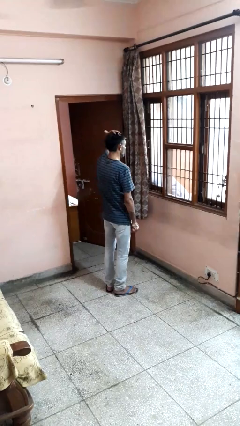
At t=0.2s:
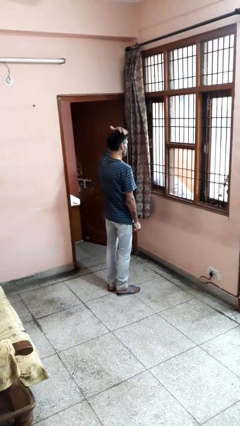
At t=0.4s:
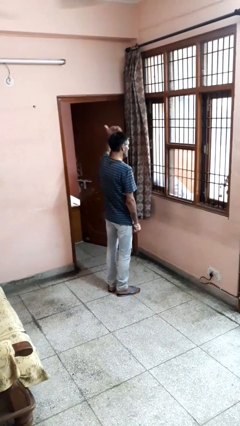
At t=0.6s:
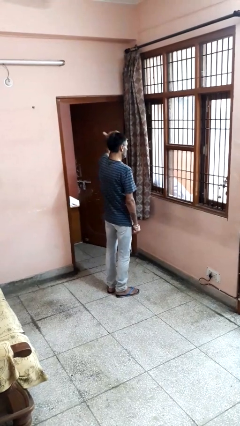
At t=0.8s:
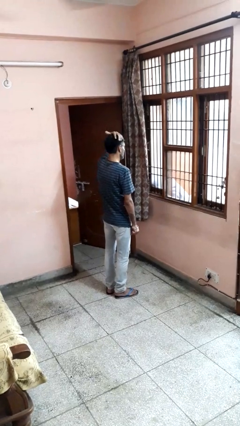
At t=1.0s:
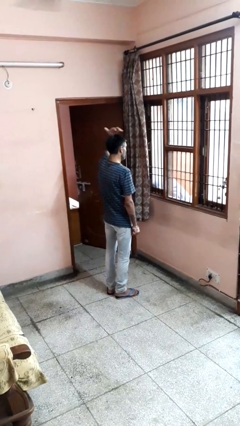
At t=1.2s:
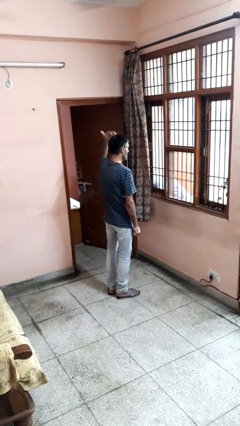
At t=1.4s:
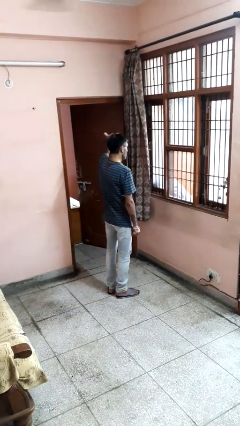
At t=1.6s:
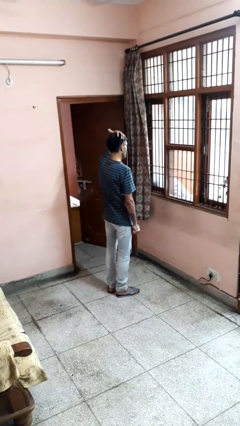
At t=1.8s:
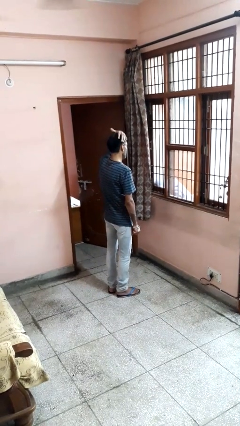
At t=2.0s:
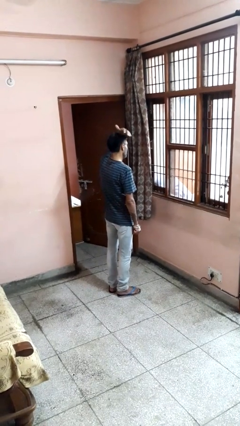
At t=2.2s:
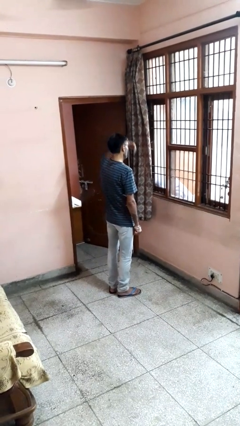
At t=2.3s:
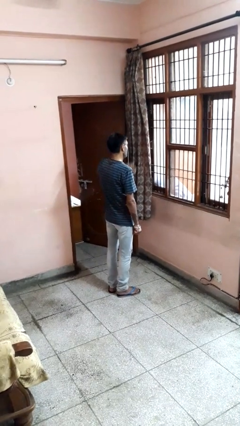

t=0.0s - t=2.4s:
person strokes hair

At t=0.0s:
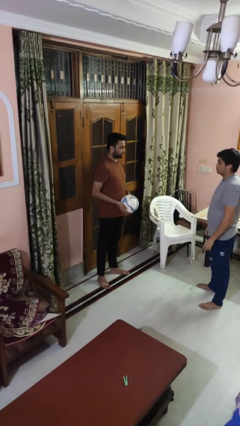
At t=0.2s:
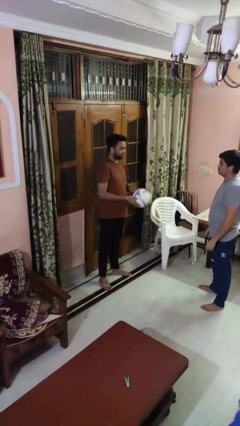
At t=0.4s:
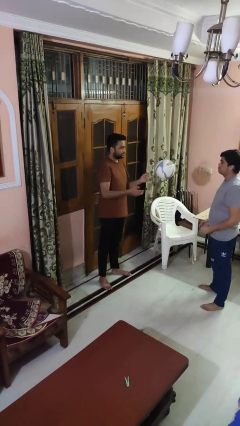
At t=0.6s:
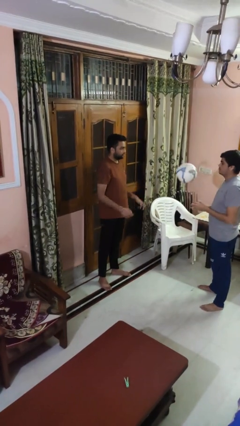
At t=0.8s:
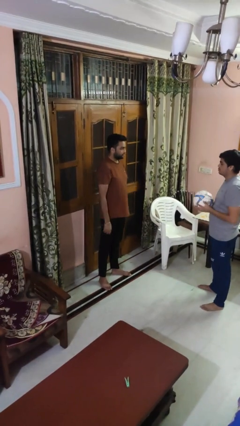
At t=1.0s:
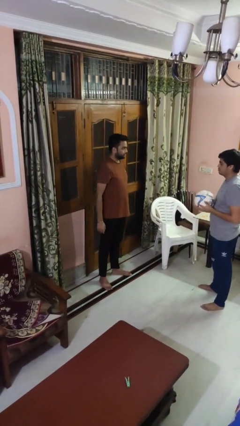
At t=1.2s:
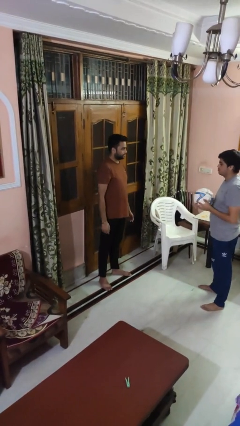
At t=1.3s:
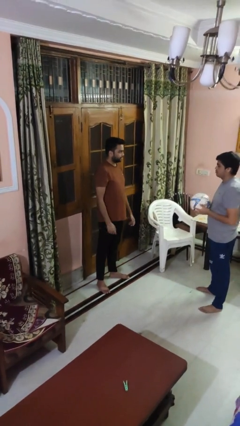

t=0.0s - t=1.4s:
person throws object to person

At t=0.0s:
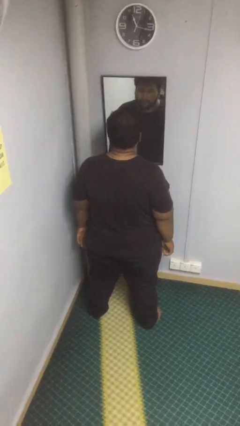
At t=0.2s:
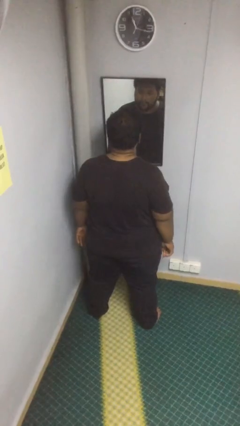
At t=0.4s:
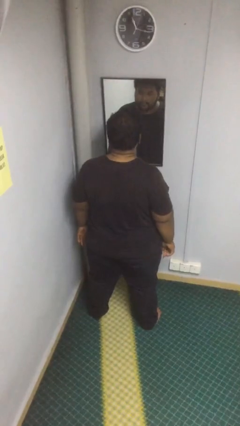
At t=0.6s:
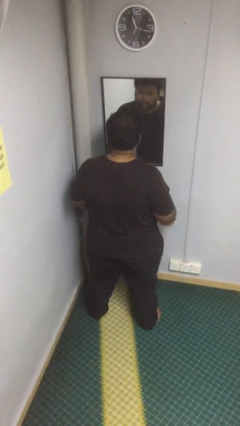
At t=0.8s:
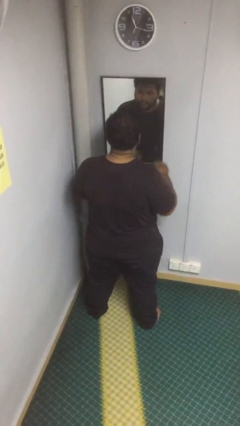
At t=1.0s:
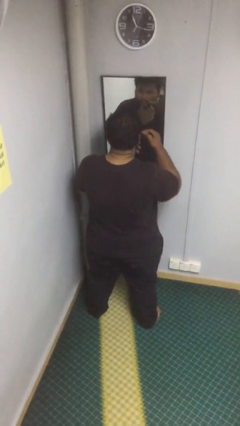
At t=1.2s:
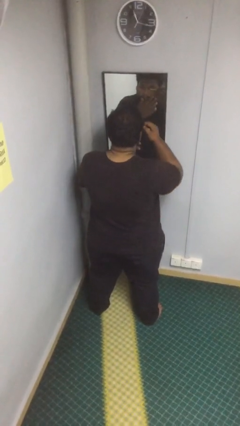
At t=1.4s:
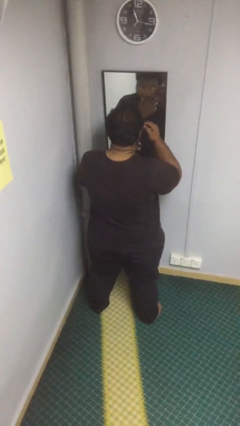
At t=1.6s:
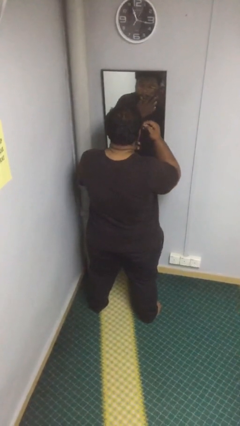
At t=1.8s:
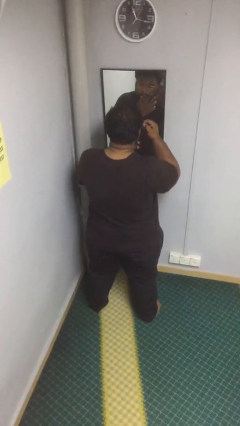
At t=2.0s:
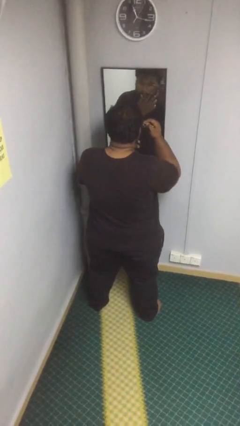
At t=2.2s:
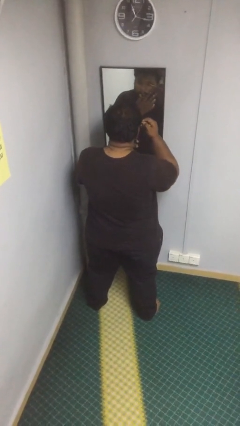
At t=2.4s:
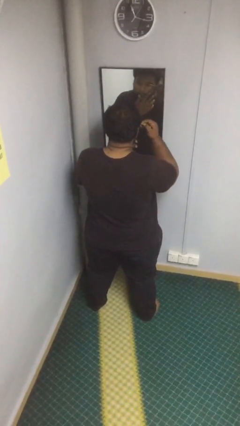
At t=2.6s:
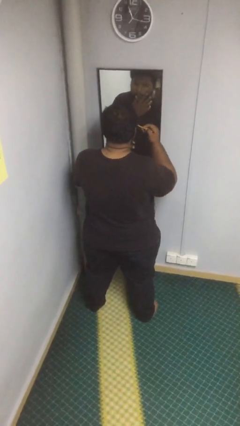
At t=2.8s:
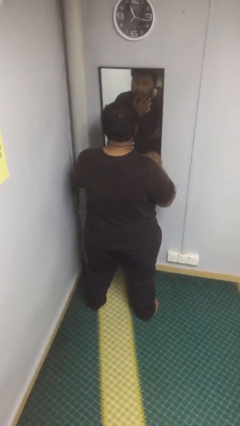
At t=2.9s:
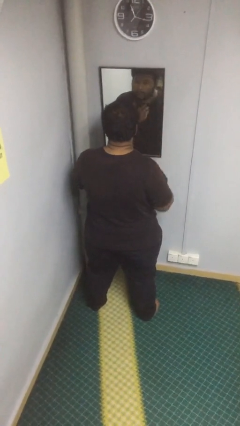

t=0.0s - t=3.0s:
person applies eye makeup

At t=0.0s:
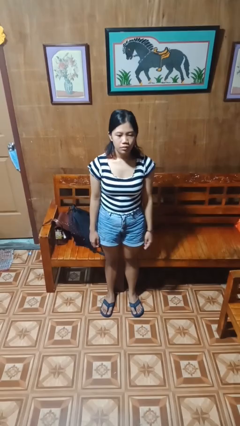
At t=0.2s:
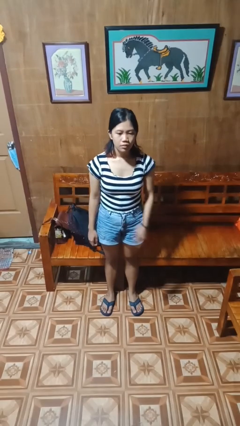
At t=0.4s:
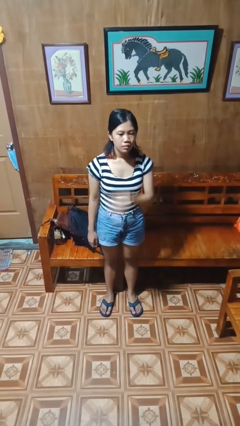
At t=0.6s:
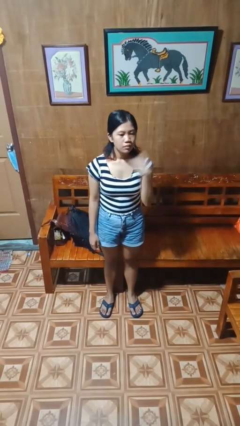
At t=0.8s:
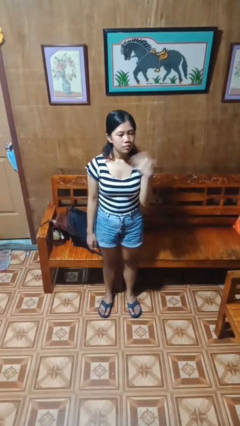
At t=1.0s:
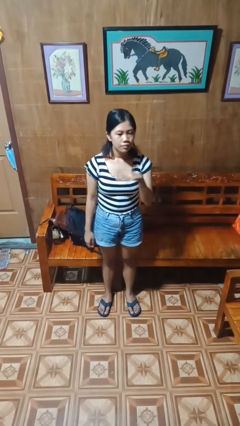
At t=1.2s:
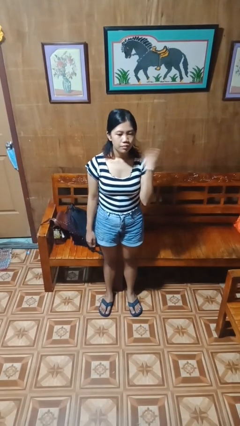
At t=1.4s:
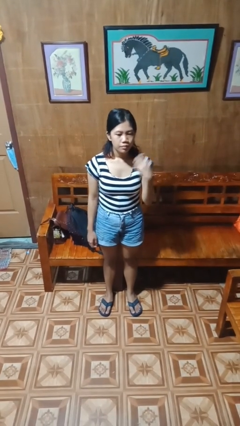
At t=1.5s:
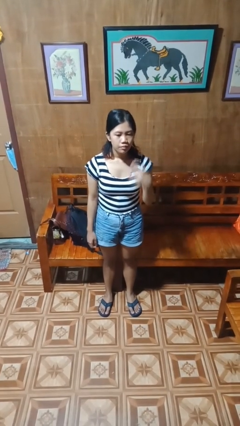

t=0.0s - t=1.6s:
person gestures cut

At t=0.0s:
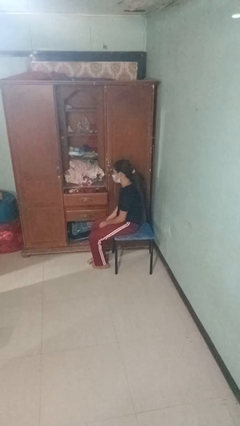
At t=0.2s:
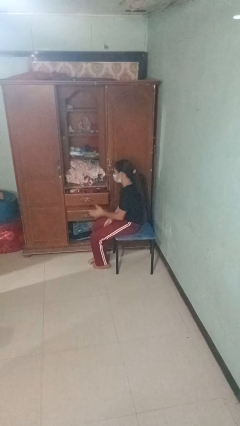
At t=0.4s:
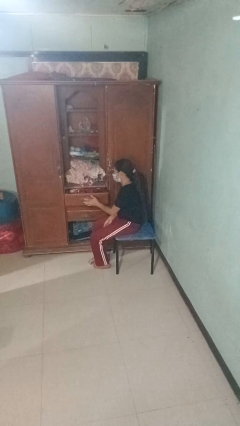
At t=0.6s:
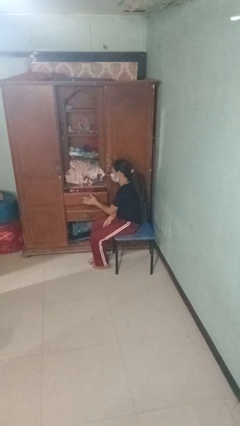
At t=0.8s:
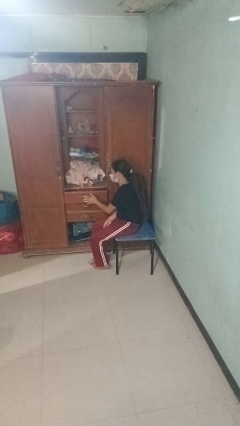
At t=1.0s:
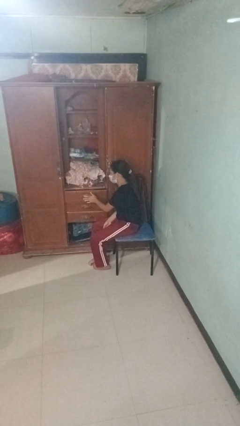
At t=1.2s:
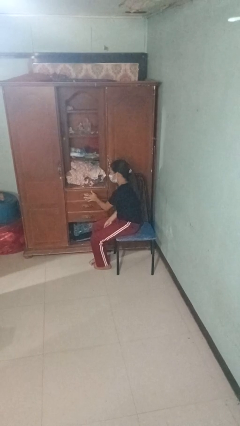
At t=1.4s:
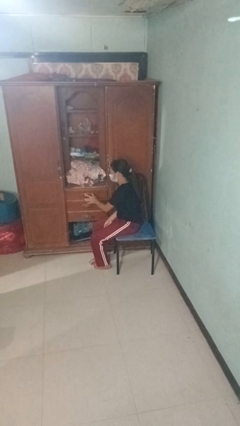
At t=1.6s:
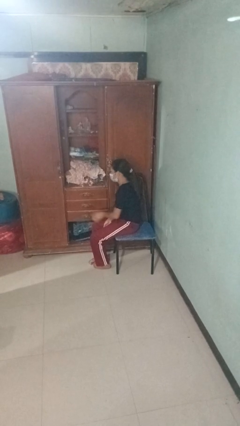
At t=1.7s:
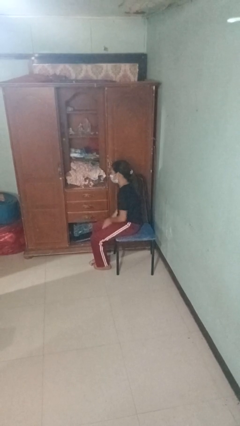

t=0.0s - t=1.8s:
person closes dresser drawer

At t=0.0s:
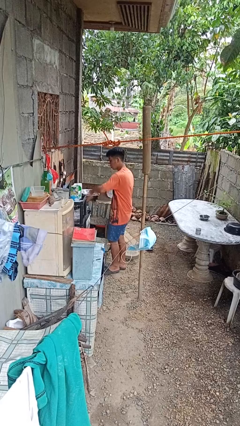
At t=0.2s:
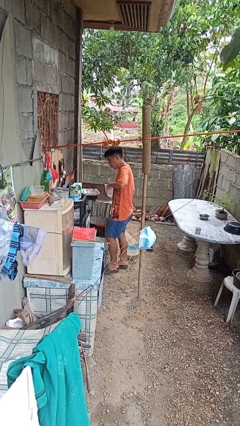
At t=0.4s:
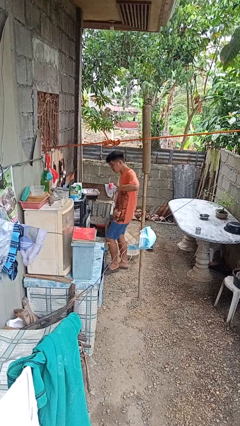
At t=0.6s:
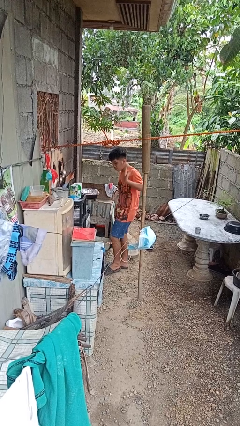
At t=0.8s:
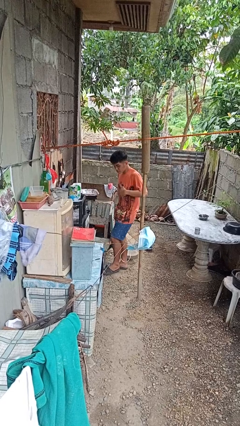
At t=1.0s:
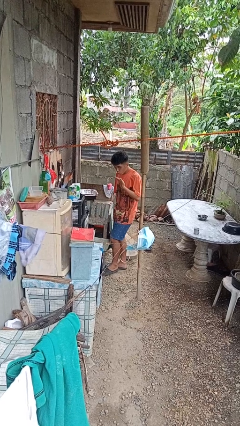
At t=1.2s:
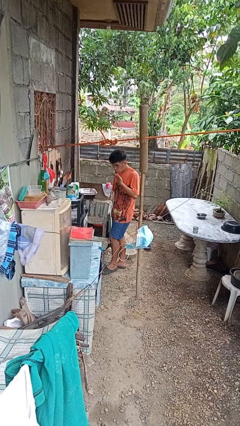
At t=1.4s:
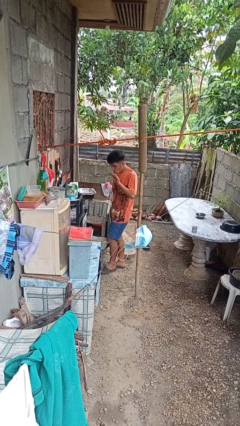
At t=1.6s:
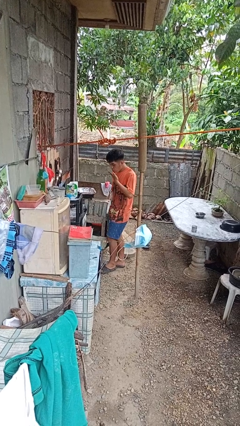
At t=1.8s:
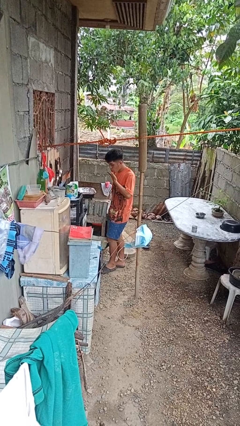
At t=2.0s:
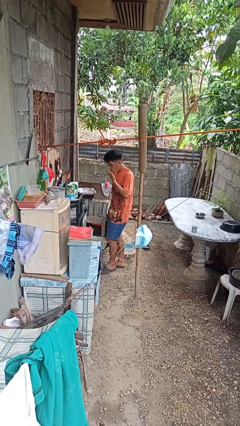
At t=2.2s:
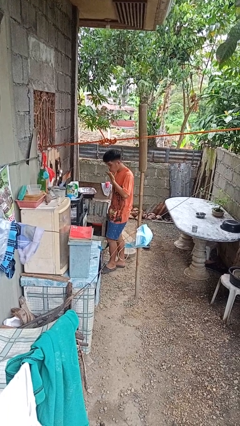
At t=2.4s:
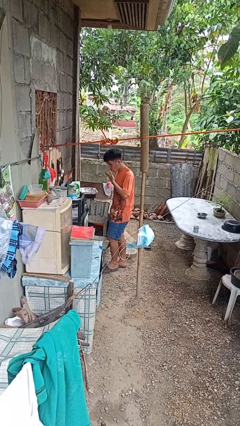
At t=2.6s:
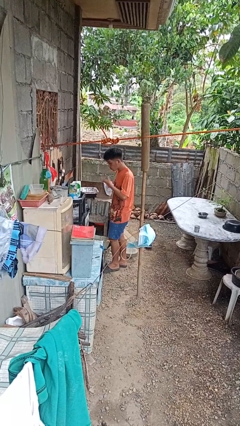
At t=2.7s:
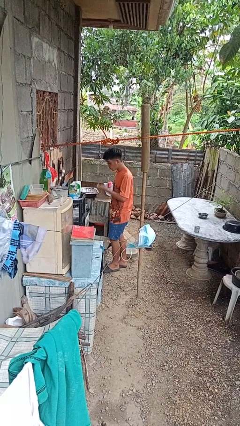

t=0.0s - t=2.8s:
person burns hand

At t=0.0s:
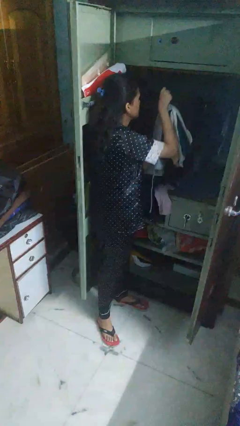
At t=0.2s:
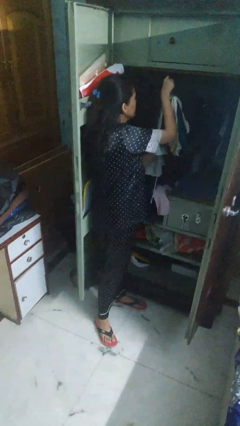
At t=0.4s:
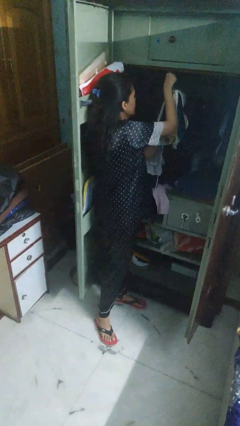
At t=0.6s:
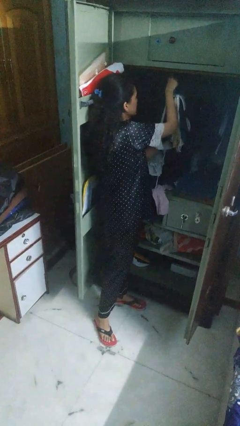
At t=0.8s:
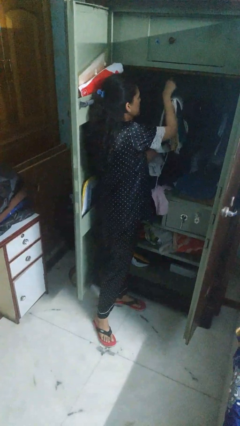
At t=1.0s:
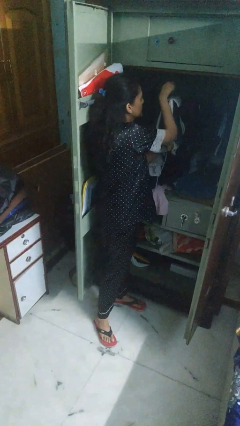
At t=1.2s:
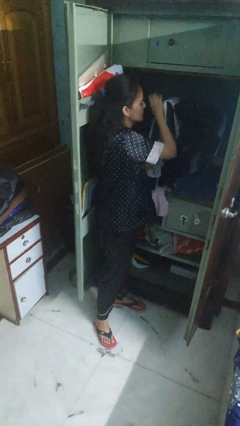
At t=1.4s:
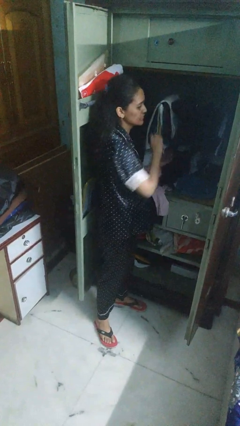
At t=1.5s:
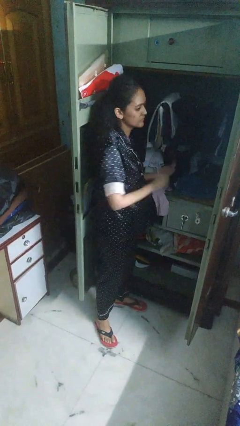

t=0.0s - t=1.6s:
person puts clothes into closet

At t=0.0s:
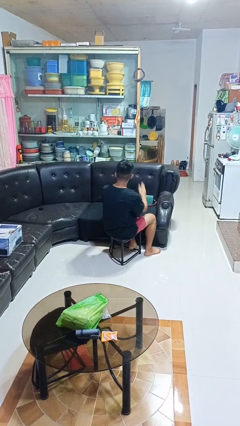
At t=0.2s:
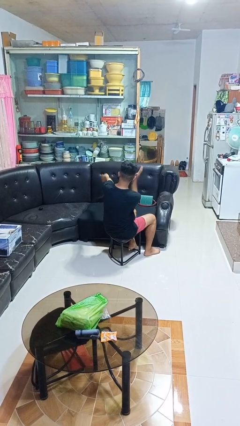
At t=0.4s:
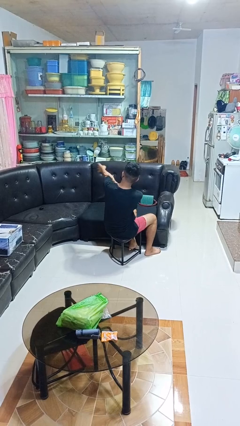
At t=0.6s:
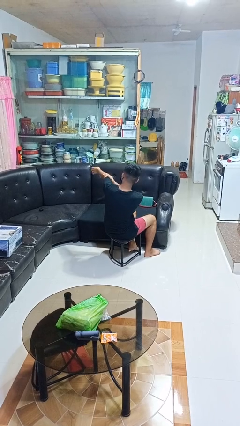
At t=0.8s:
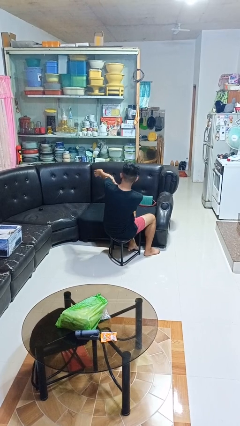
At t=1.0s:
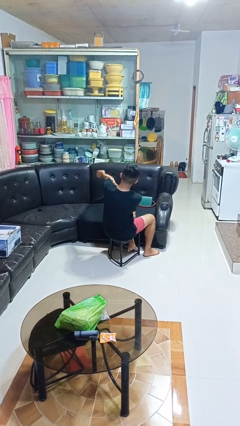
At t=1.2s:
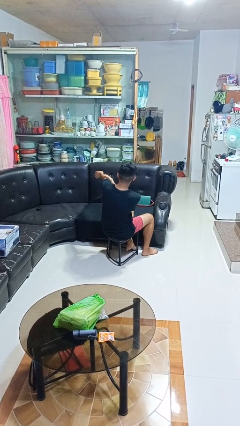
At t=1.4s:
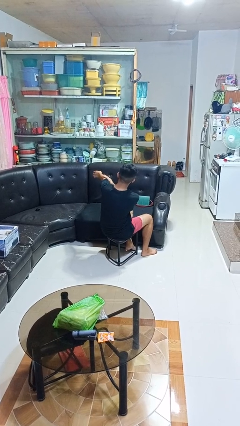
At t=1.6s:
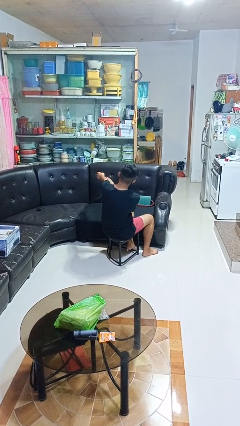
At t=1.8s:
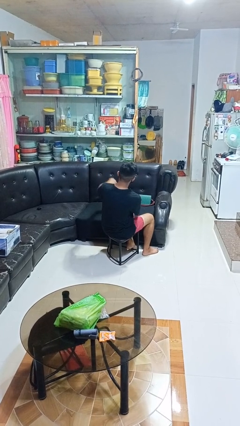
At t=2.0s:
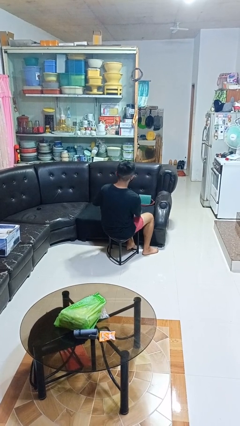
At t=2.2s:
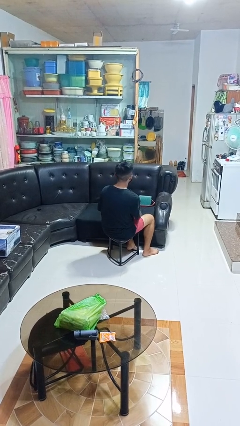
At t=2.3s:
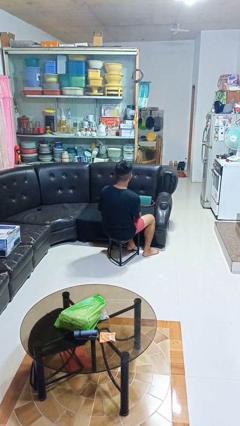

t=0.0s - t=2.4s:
person swats bug
